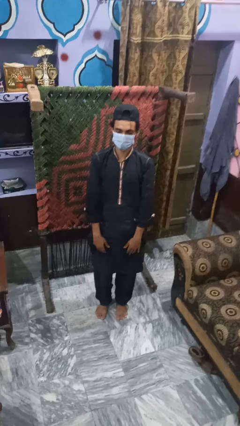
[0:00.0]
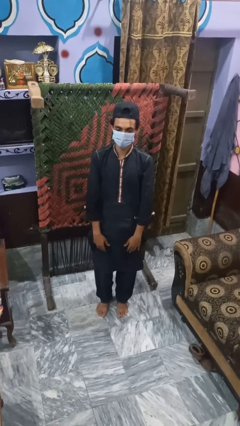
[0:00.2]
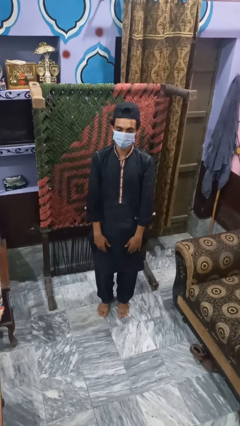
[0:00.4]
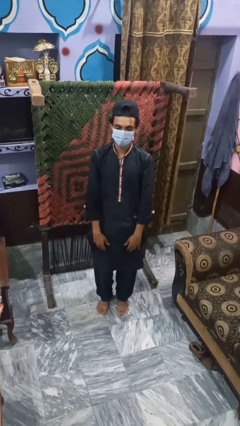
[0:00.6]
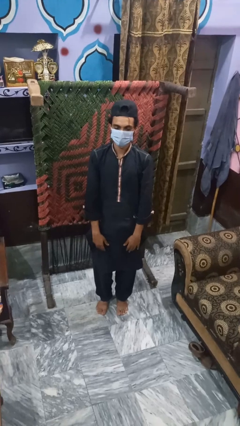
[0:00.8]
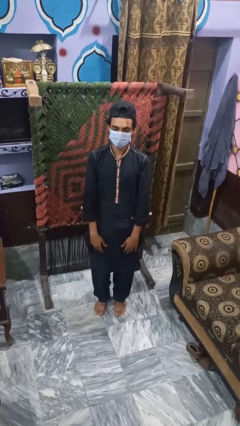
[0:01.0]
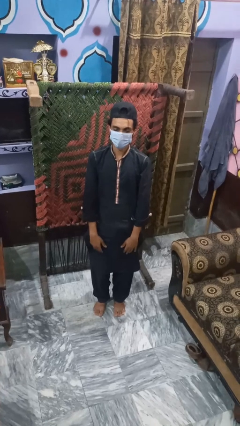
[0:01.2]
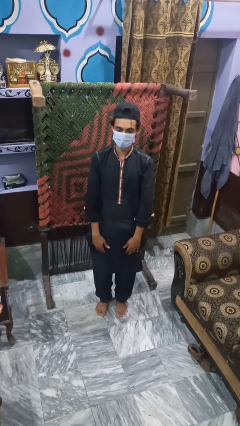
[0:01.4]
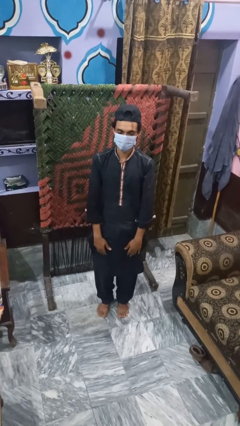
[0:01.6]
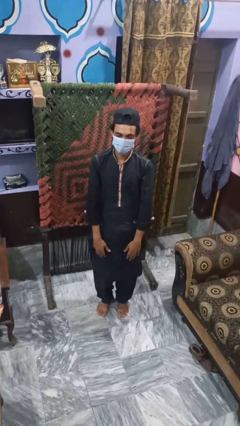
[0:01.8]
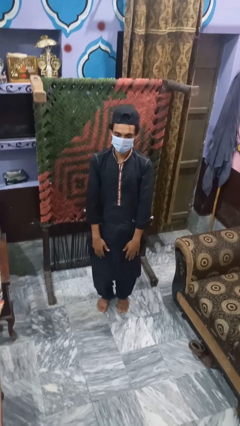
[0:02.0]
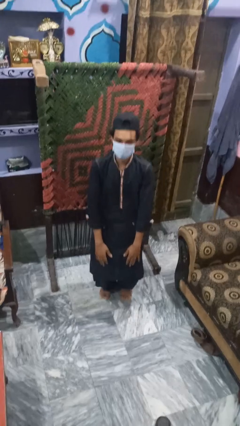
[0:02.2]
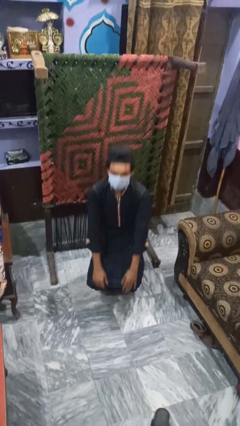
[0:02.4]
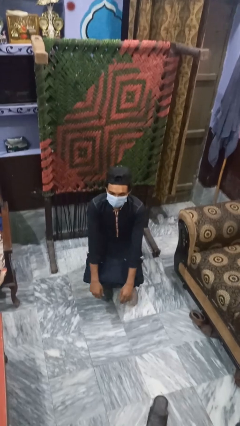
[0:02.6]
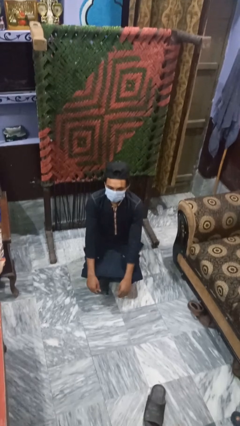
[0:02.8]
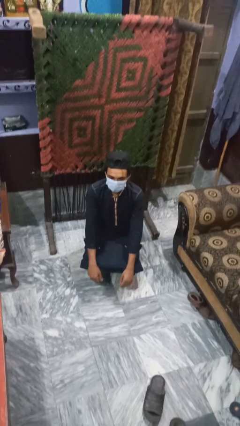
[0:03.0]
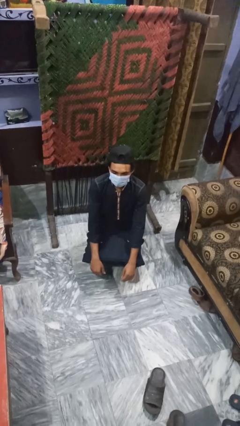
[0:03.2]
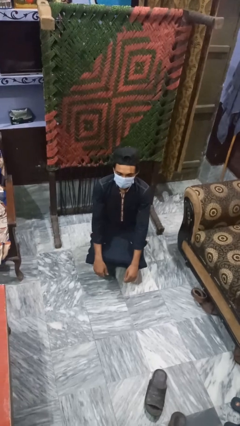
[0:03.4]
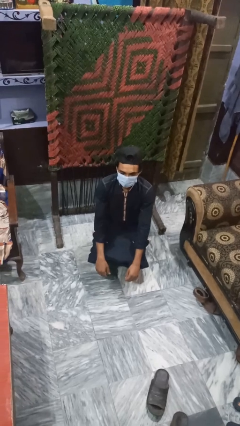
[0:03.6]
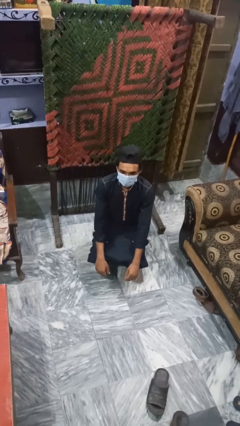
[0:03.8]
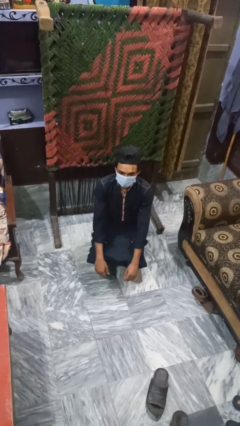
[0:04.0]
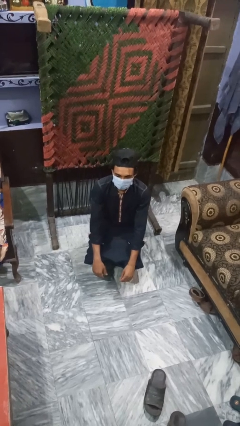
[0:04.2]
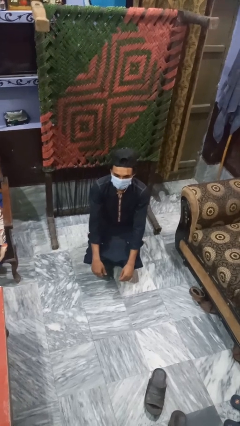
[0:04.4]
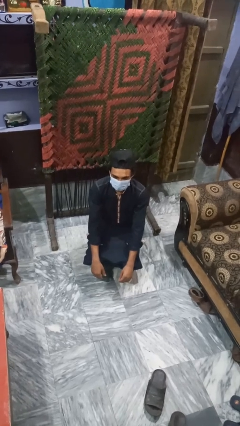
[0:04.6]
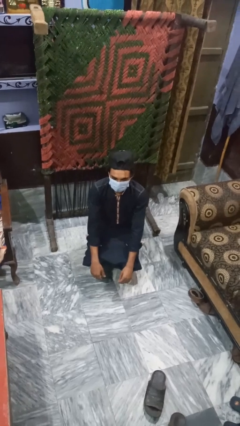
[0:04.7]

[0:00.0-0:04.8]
person squats

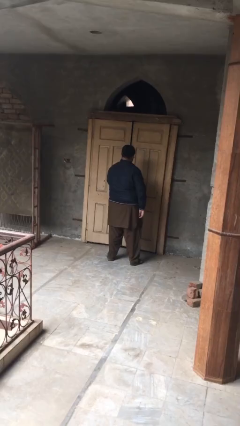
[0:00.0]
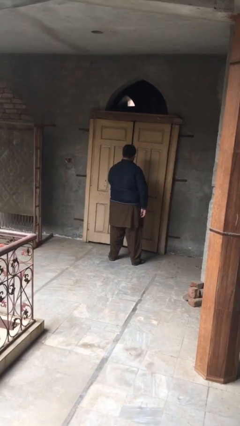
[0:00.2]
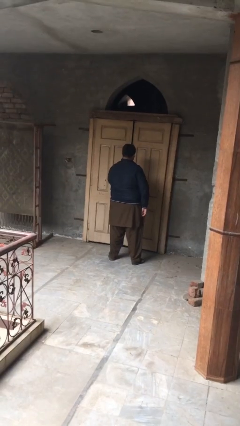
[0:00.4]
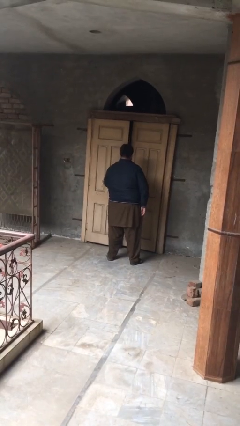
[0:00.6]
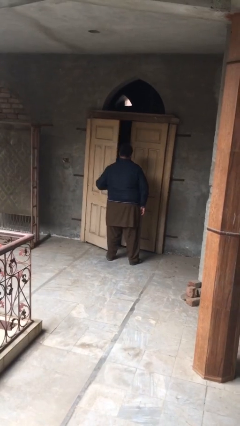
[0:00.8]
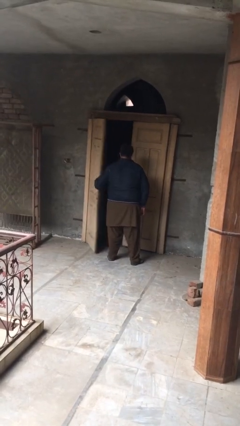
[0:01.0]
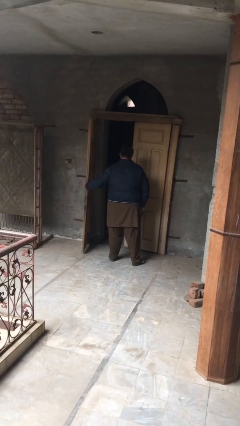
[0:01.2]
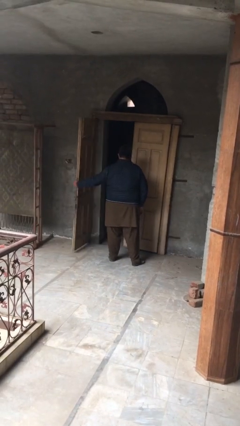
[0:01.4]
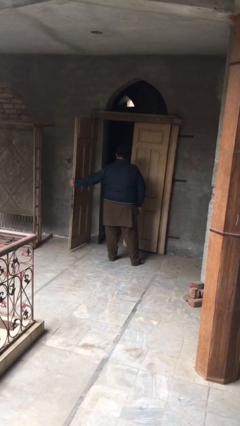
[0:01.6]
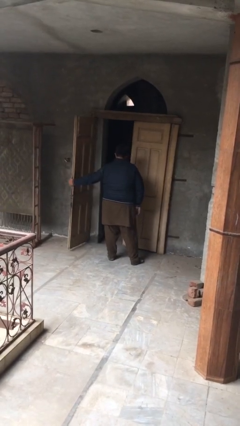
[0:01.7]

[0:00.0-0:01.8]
person opens facility door

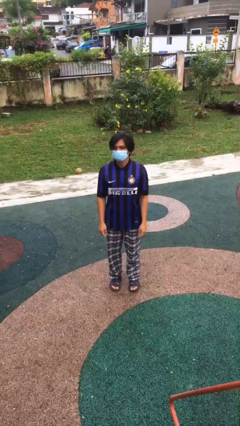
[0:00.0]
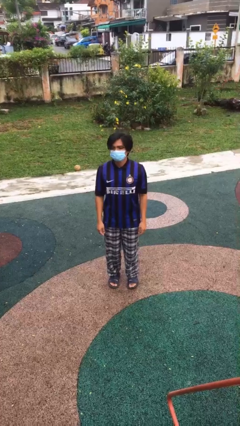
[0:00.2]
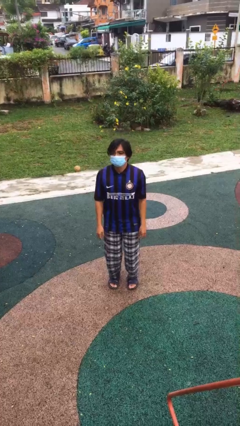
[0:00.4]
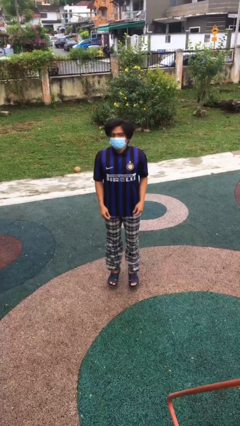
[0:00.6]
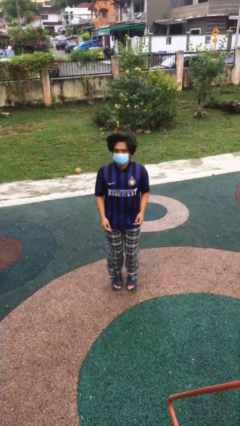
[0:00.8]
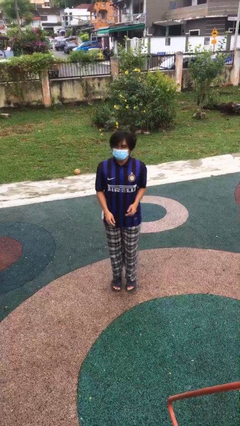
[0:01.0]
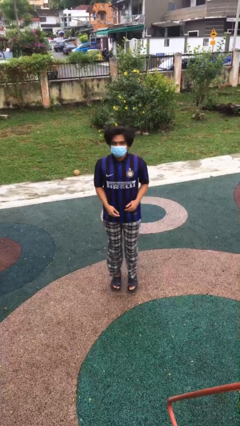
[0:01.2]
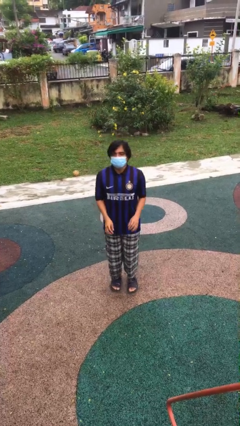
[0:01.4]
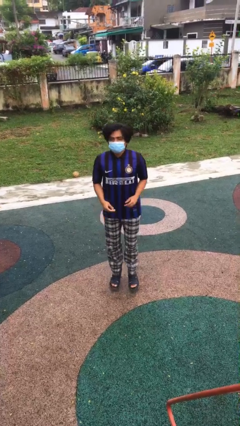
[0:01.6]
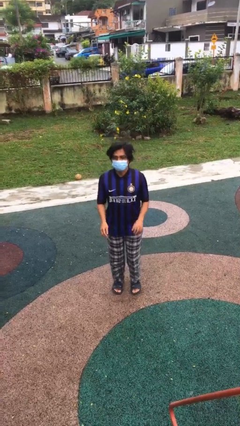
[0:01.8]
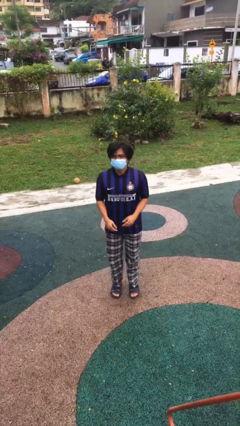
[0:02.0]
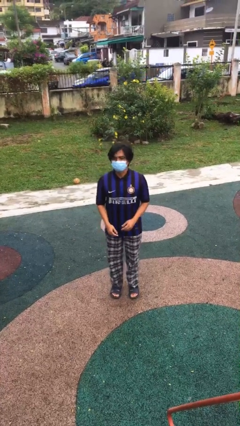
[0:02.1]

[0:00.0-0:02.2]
person jumps

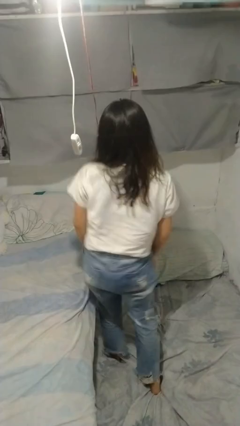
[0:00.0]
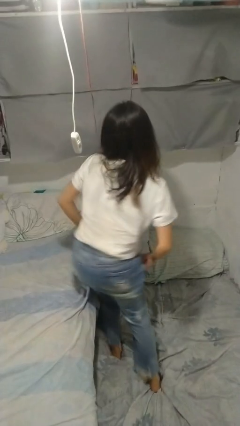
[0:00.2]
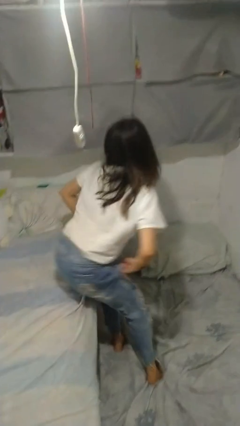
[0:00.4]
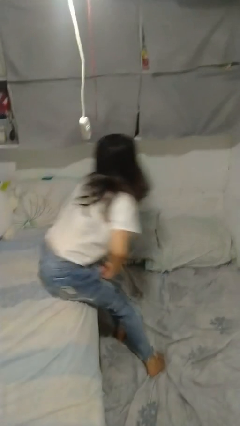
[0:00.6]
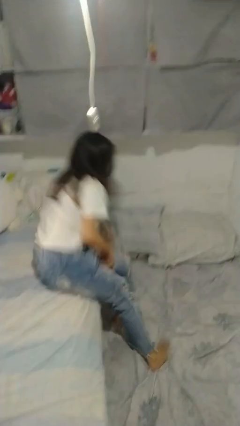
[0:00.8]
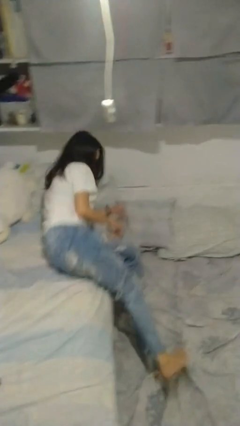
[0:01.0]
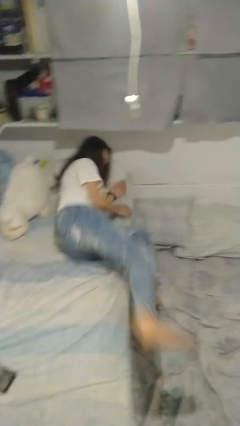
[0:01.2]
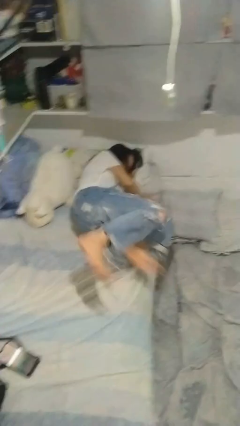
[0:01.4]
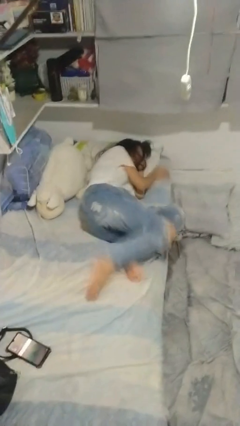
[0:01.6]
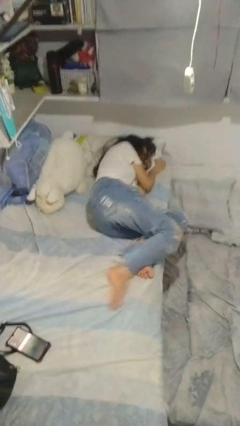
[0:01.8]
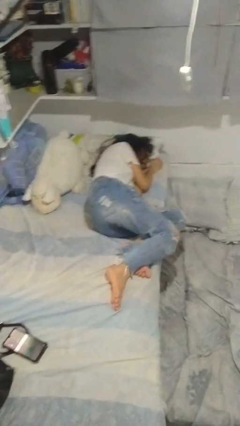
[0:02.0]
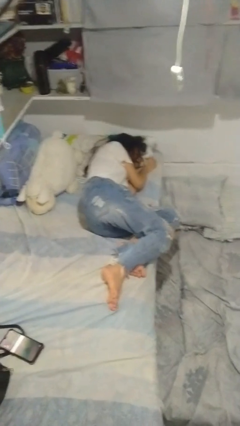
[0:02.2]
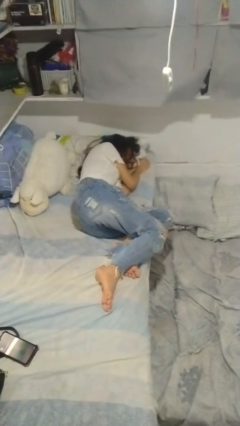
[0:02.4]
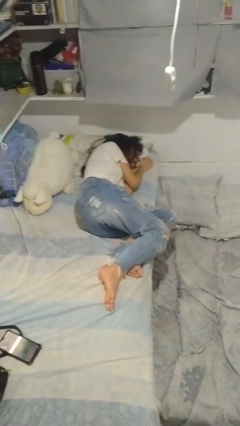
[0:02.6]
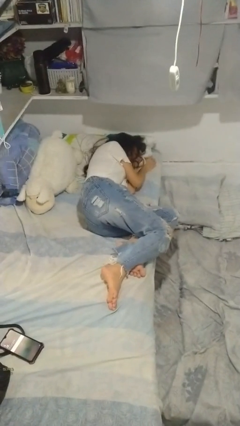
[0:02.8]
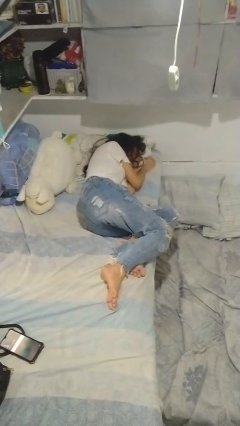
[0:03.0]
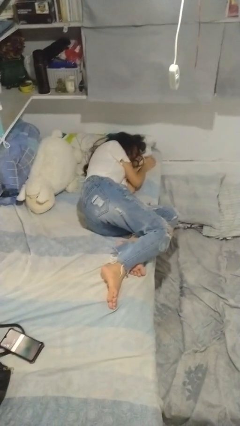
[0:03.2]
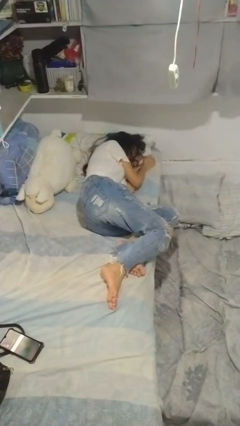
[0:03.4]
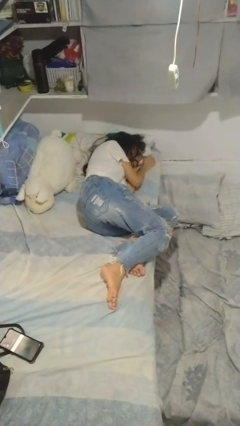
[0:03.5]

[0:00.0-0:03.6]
person lies down on bed

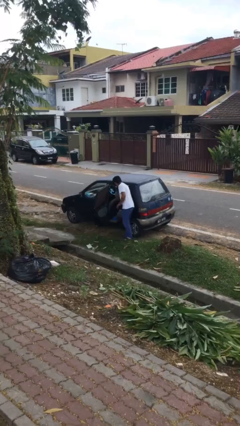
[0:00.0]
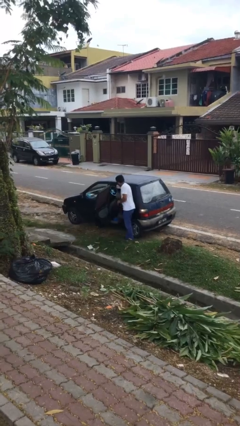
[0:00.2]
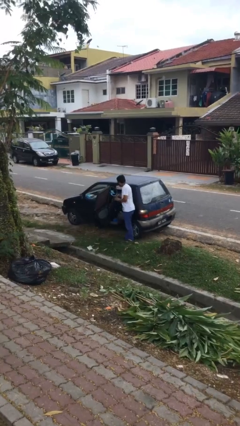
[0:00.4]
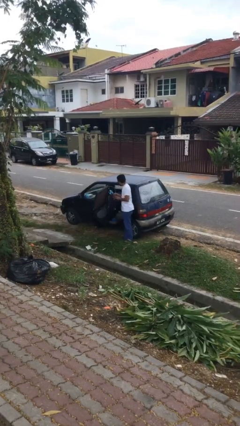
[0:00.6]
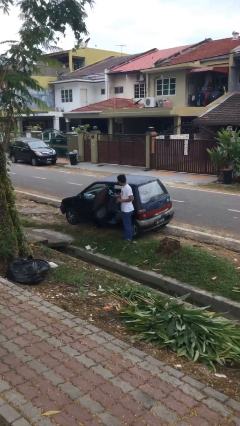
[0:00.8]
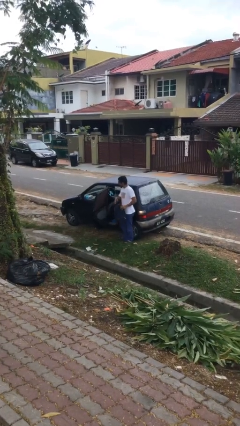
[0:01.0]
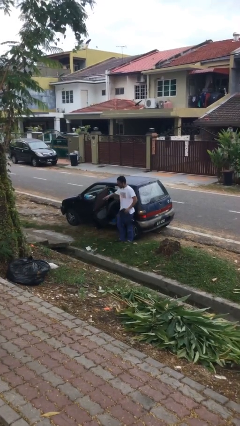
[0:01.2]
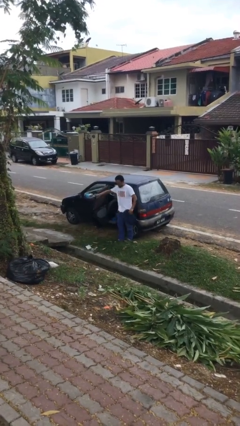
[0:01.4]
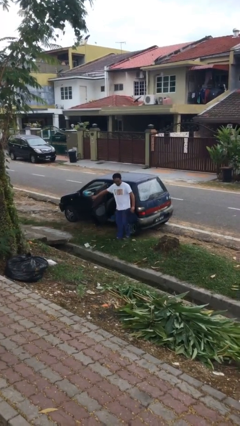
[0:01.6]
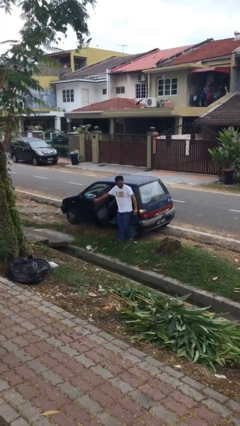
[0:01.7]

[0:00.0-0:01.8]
person unloads car

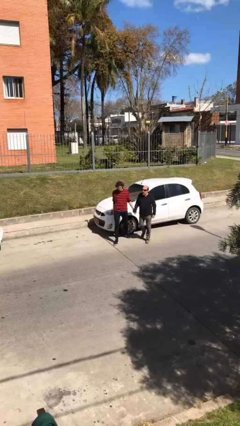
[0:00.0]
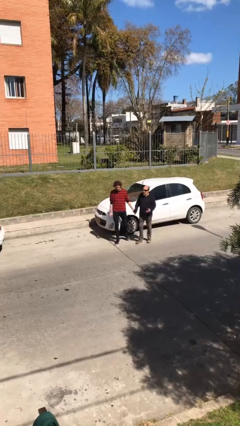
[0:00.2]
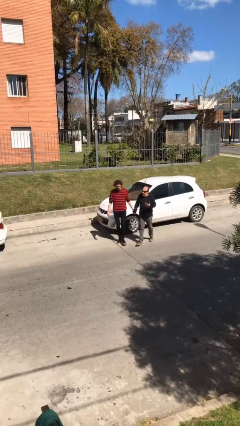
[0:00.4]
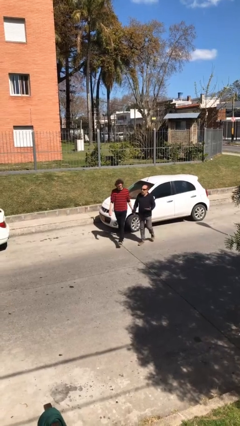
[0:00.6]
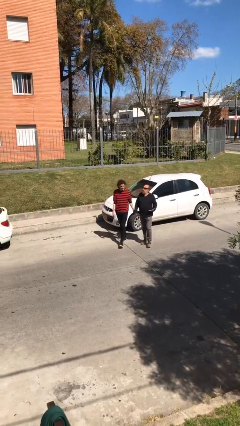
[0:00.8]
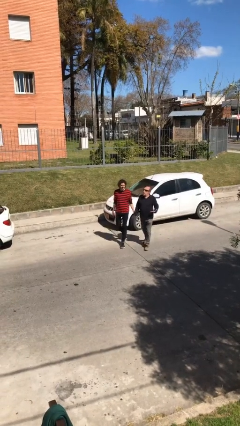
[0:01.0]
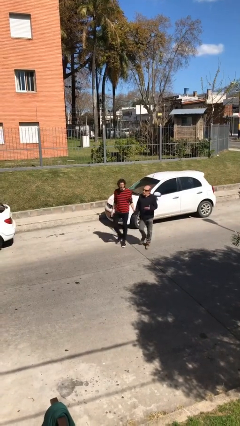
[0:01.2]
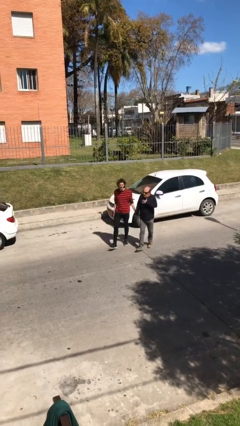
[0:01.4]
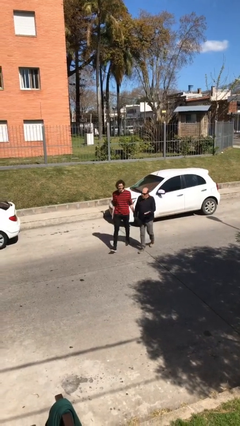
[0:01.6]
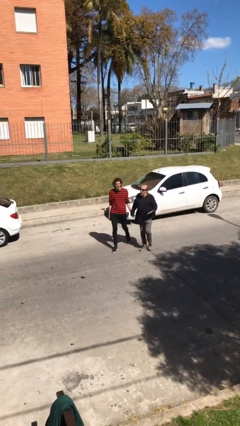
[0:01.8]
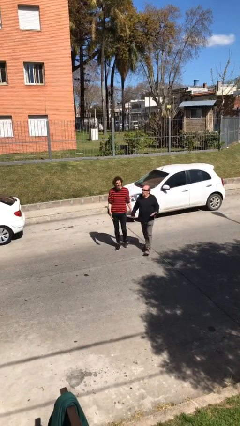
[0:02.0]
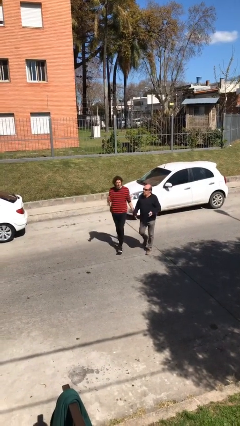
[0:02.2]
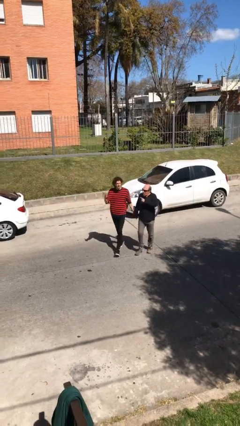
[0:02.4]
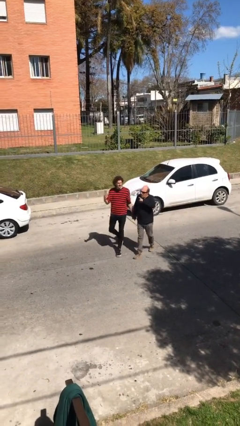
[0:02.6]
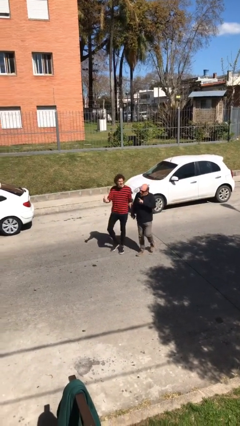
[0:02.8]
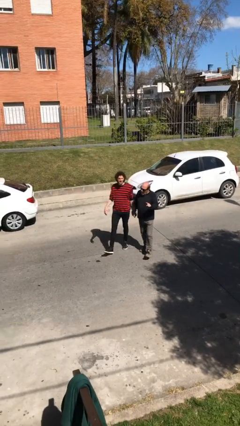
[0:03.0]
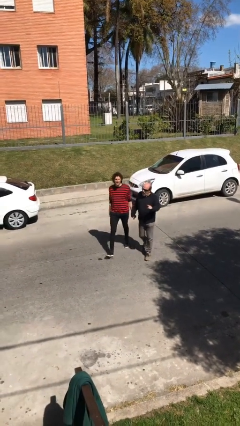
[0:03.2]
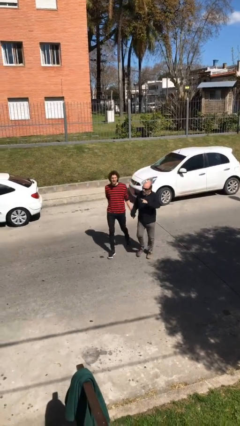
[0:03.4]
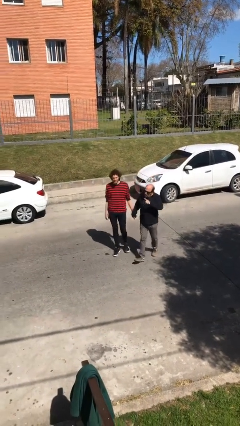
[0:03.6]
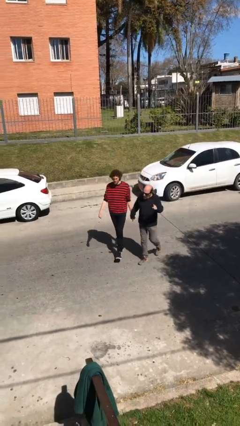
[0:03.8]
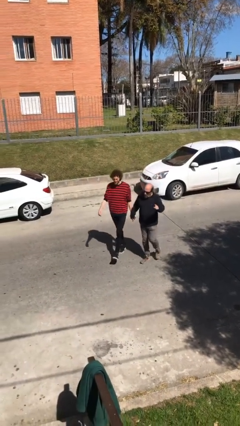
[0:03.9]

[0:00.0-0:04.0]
person holds hand
